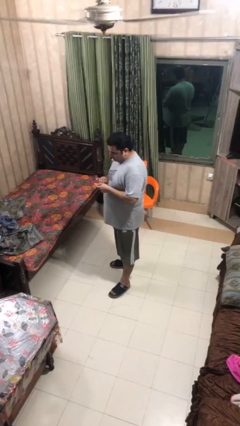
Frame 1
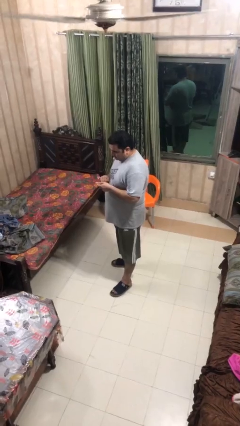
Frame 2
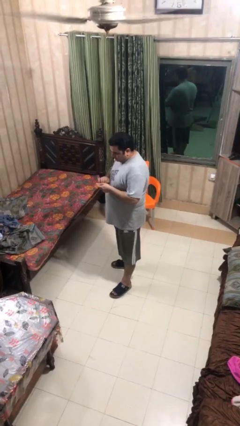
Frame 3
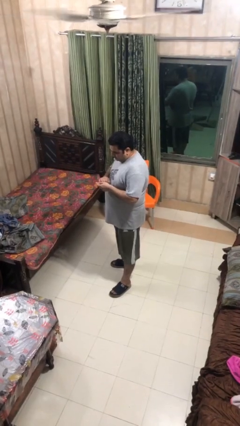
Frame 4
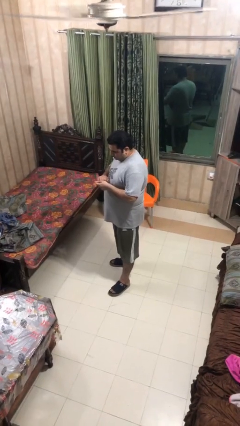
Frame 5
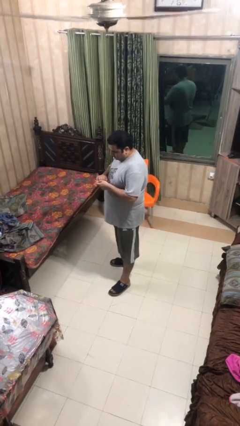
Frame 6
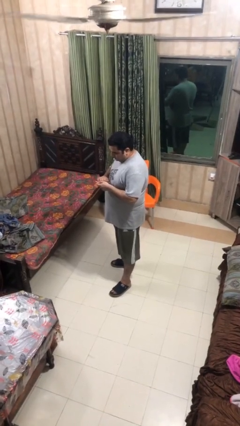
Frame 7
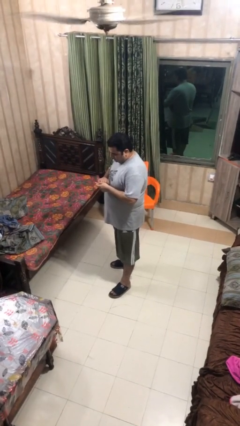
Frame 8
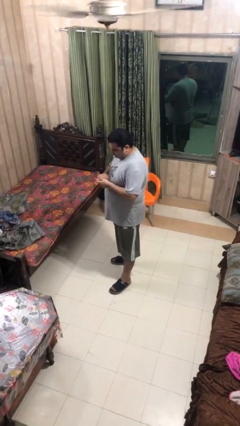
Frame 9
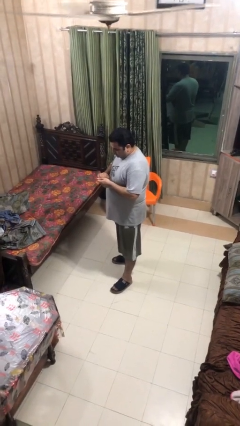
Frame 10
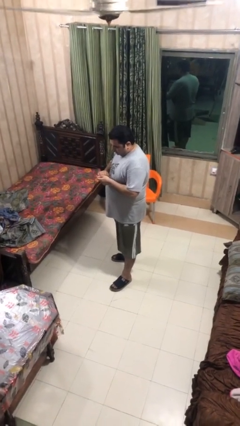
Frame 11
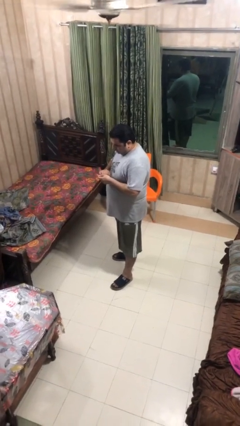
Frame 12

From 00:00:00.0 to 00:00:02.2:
person files fingernails

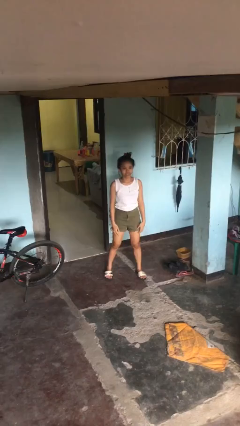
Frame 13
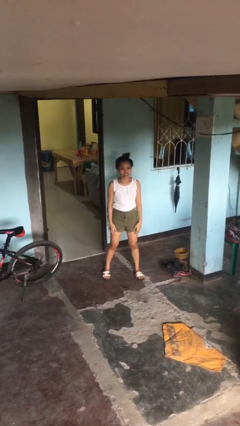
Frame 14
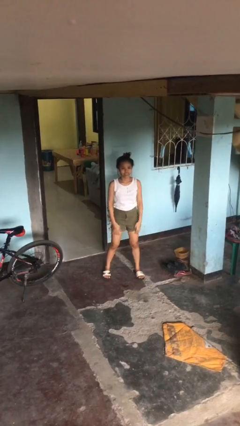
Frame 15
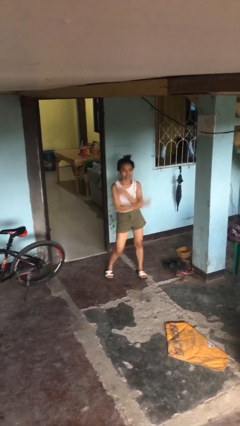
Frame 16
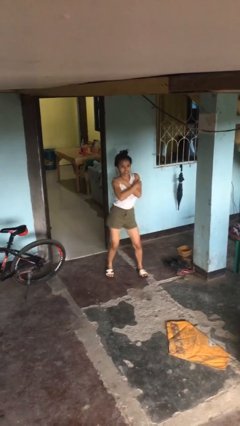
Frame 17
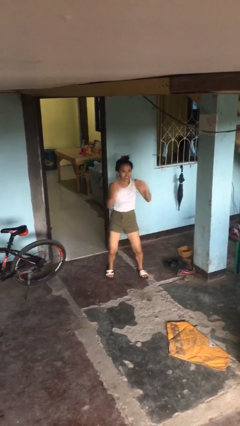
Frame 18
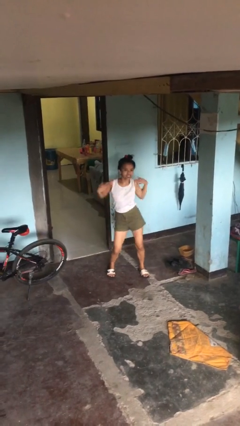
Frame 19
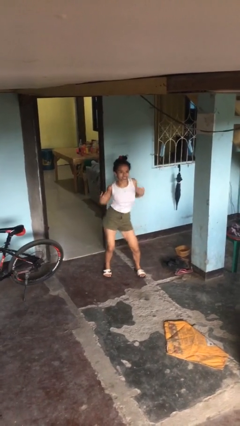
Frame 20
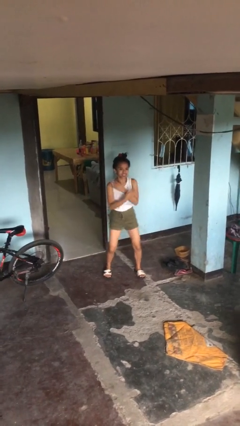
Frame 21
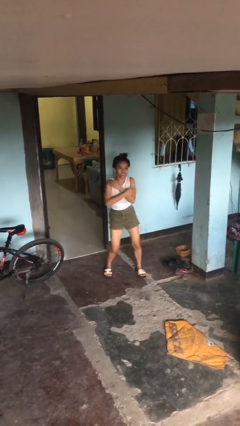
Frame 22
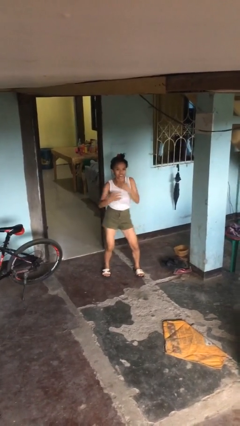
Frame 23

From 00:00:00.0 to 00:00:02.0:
person dances in place

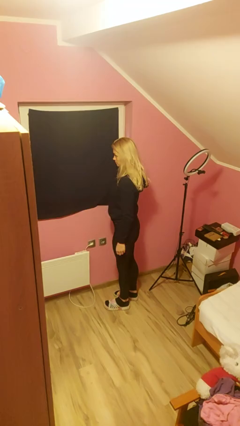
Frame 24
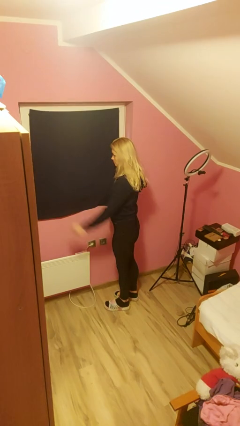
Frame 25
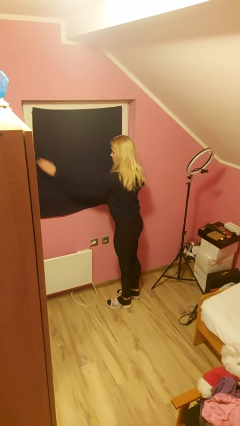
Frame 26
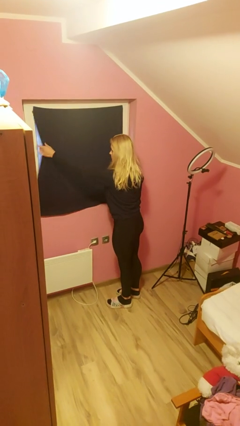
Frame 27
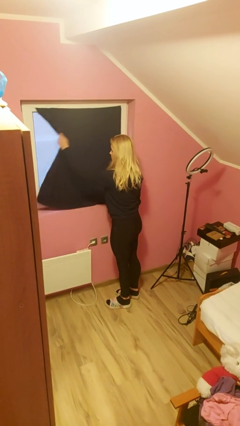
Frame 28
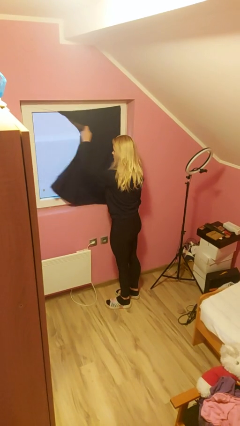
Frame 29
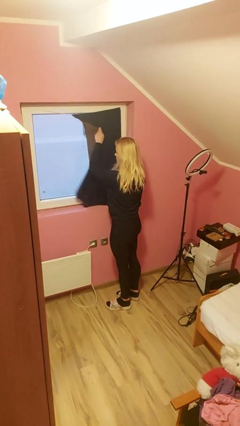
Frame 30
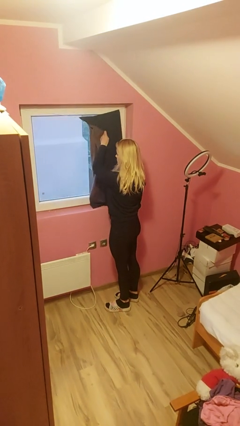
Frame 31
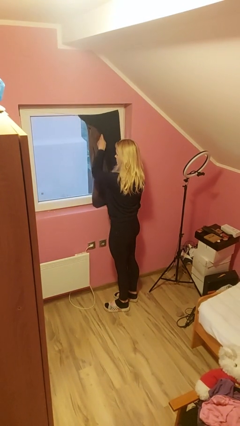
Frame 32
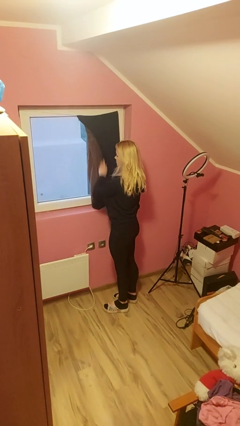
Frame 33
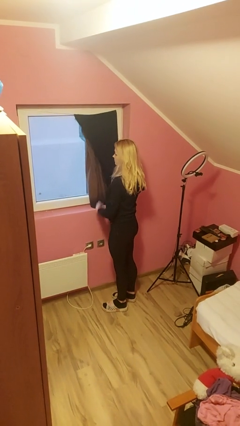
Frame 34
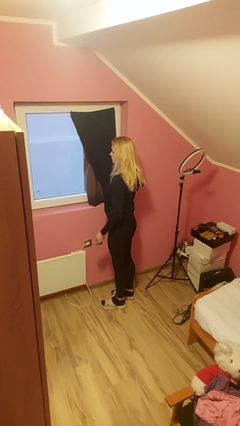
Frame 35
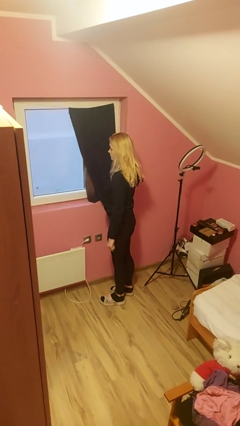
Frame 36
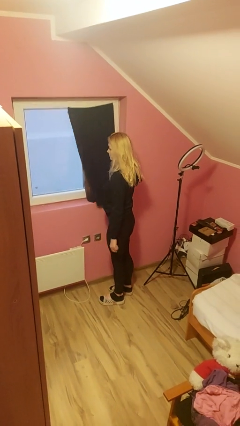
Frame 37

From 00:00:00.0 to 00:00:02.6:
person opens curtains

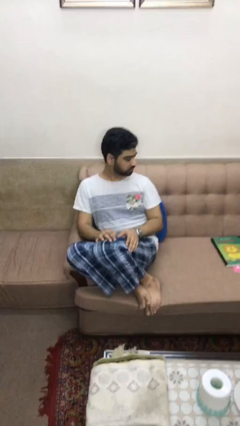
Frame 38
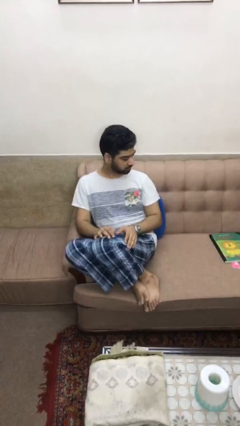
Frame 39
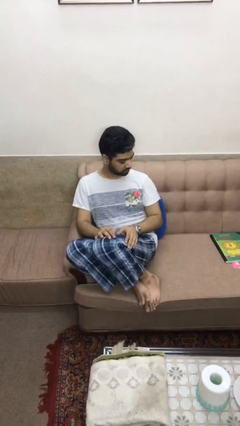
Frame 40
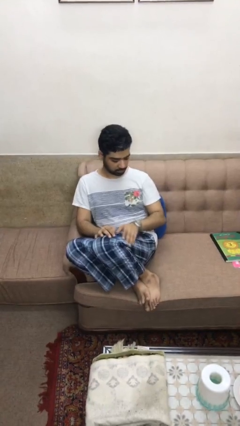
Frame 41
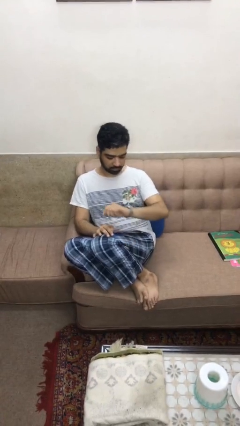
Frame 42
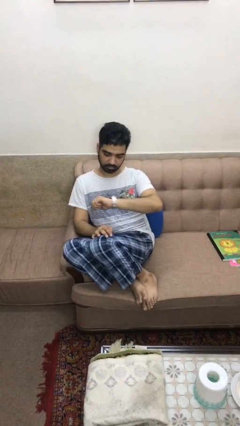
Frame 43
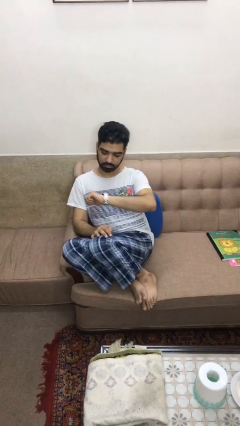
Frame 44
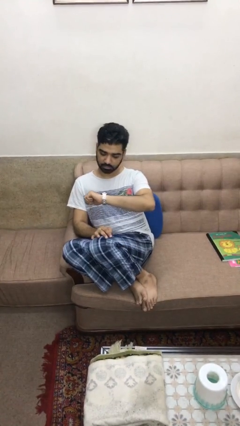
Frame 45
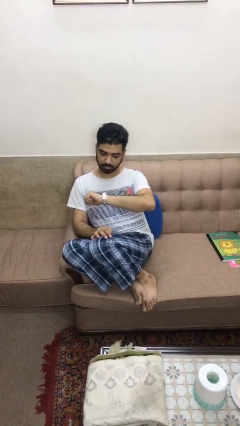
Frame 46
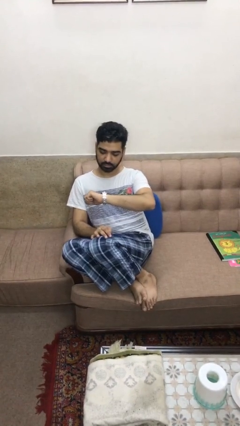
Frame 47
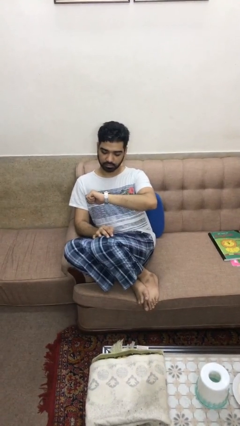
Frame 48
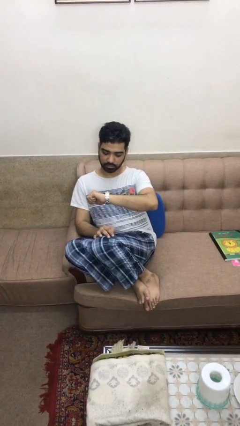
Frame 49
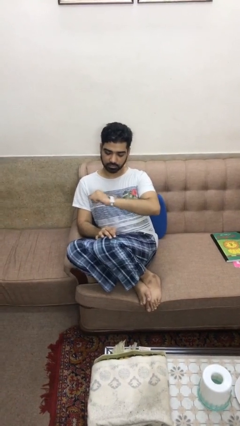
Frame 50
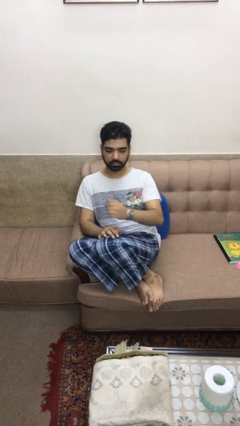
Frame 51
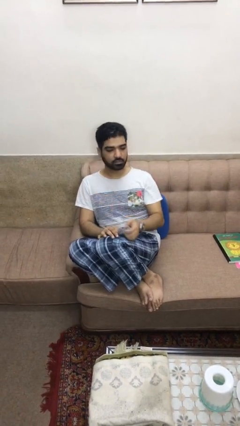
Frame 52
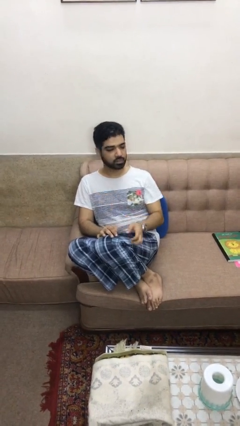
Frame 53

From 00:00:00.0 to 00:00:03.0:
person looks at wristwatch

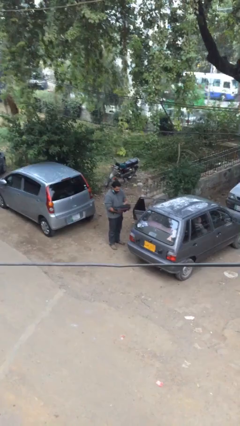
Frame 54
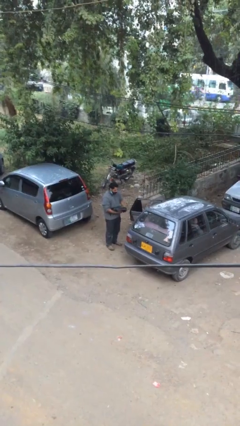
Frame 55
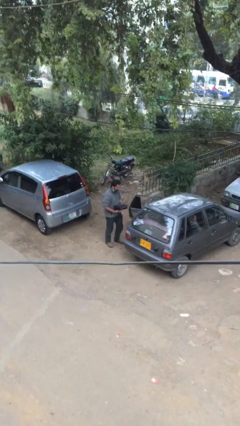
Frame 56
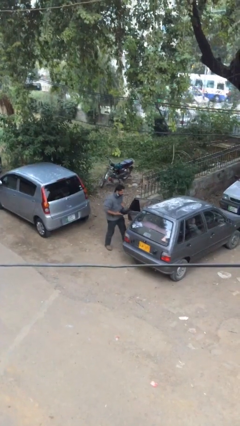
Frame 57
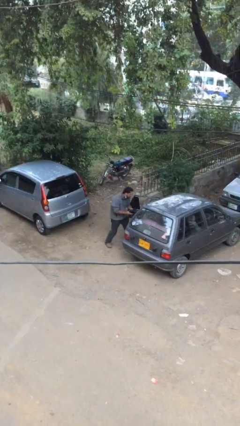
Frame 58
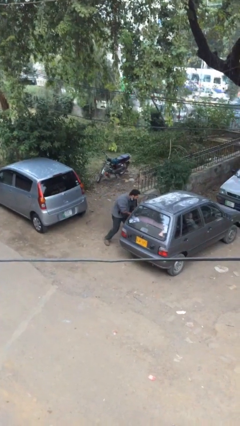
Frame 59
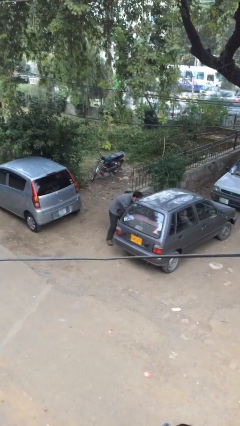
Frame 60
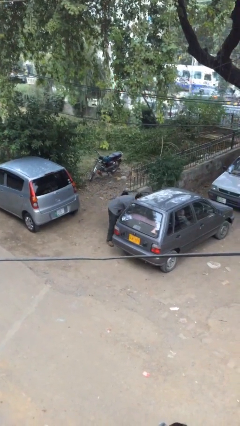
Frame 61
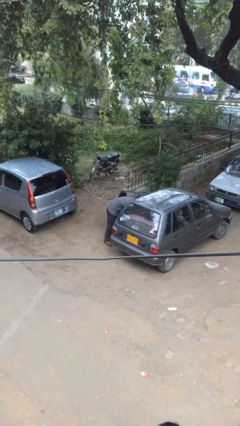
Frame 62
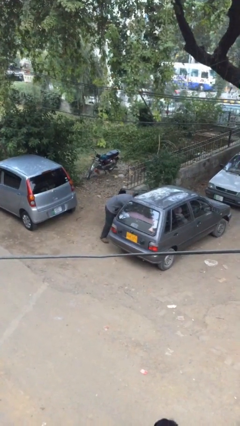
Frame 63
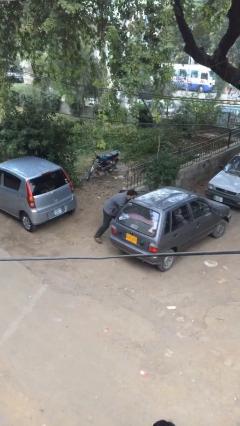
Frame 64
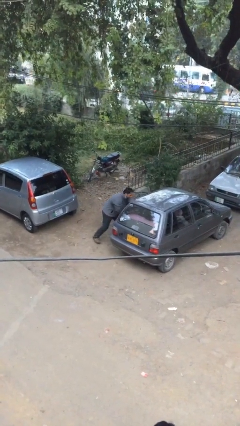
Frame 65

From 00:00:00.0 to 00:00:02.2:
person loads car

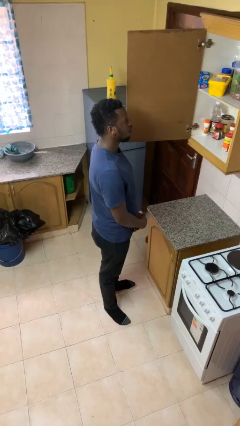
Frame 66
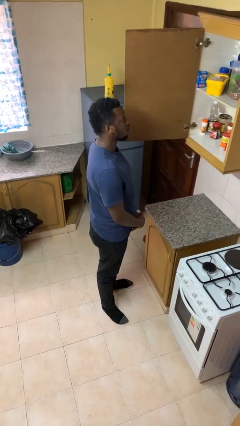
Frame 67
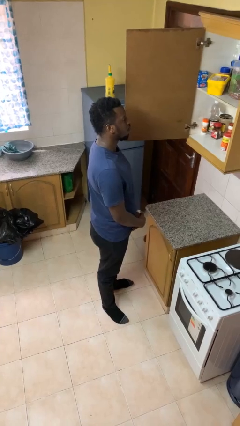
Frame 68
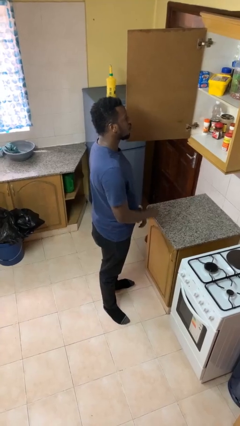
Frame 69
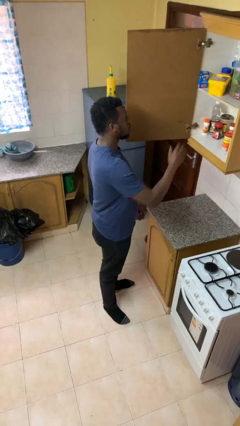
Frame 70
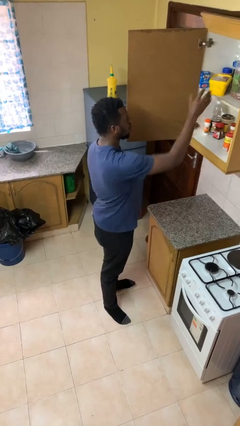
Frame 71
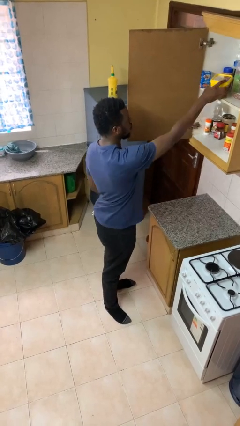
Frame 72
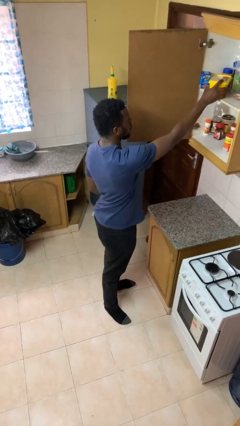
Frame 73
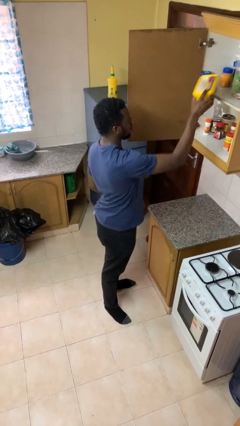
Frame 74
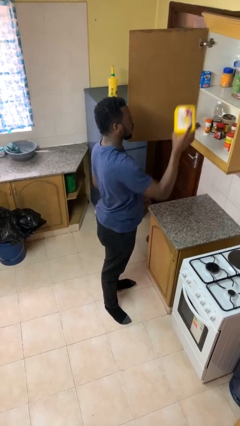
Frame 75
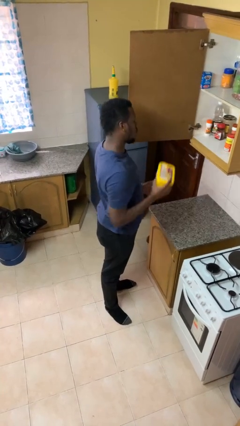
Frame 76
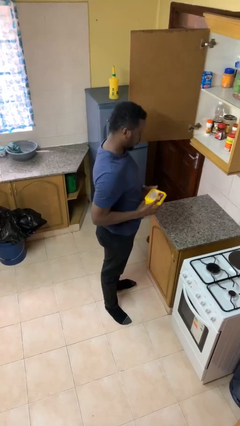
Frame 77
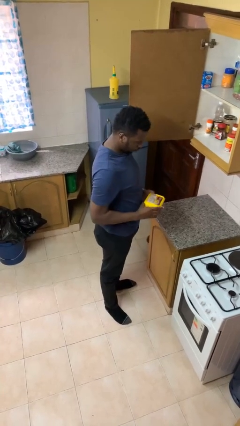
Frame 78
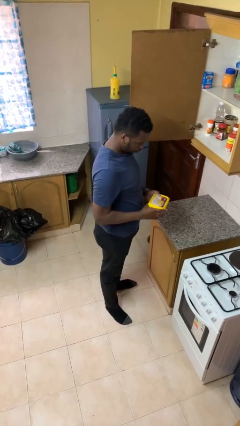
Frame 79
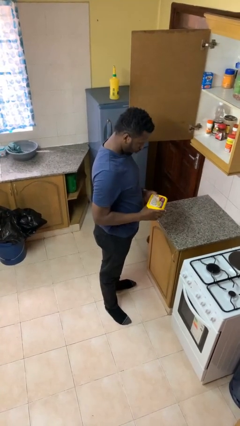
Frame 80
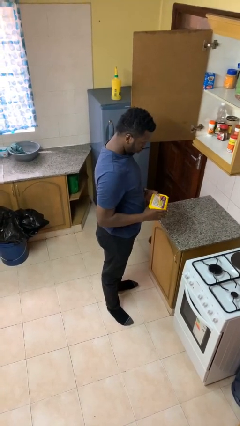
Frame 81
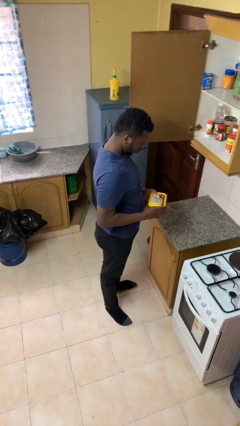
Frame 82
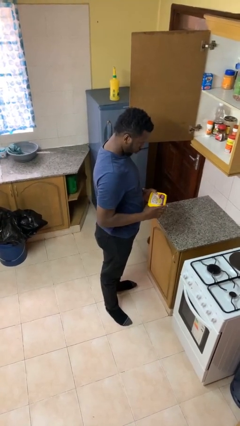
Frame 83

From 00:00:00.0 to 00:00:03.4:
person picks up object from shelf

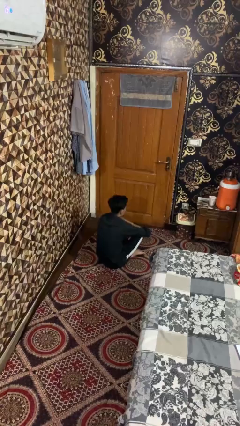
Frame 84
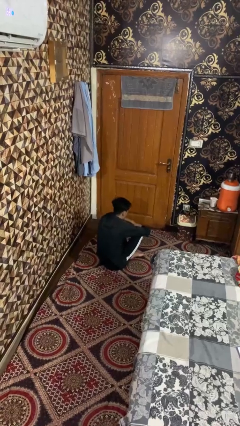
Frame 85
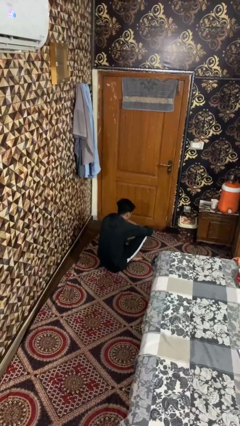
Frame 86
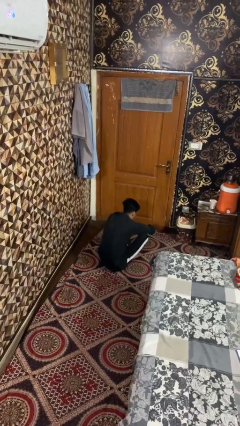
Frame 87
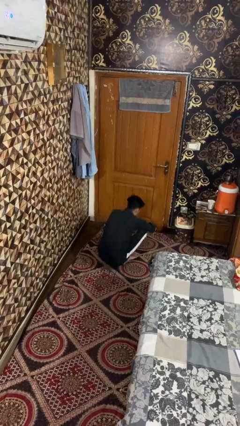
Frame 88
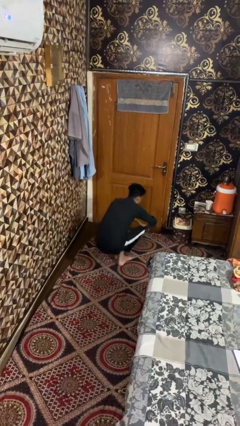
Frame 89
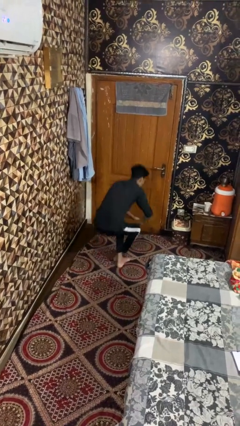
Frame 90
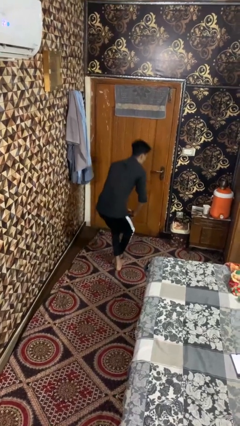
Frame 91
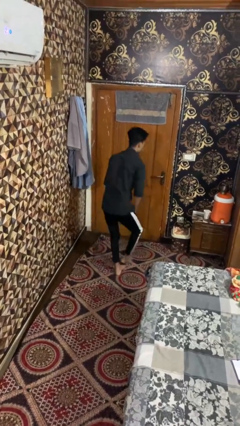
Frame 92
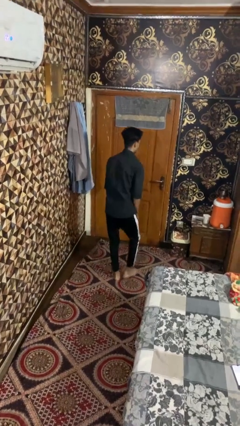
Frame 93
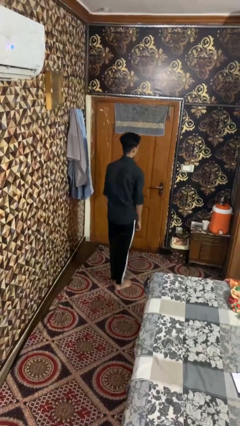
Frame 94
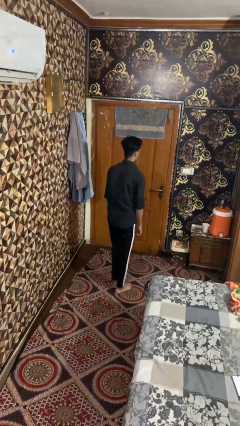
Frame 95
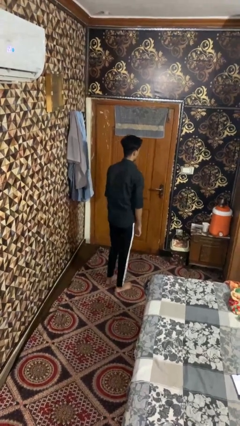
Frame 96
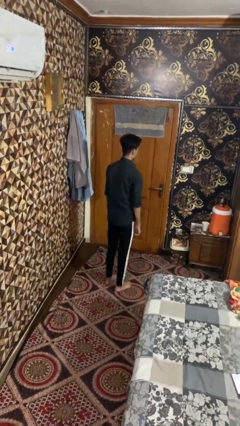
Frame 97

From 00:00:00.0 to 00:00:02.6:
person stands up from floor
